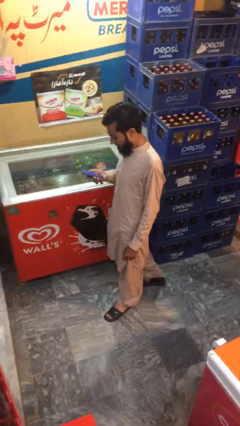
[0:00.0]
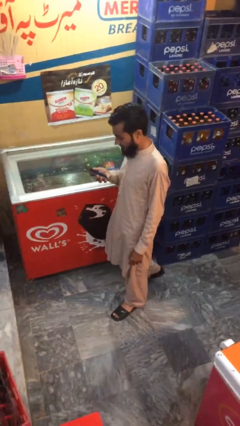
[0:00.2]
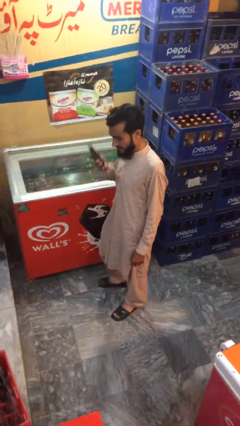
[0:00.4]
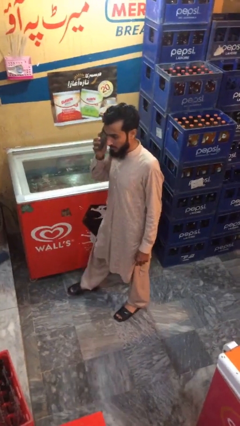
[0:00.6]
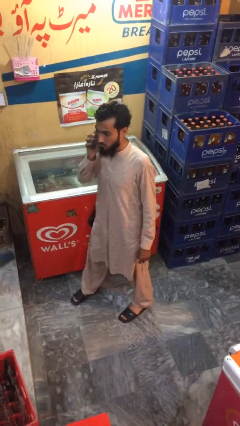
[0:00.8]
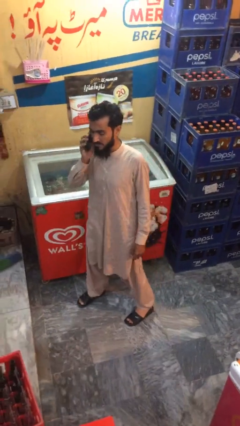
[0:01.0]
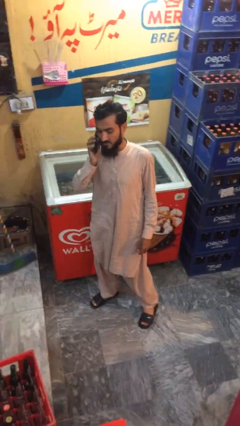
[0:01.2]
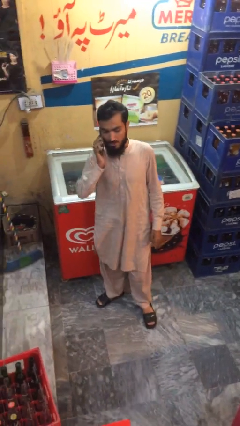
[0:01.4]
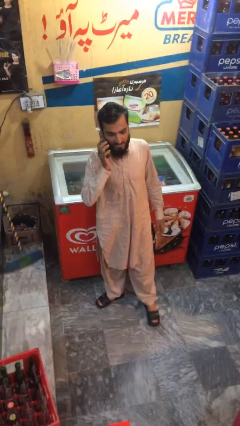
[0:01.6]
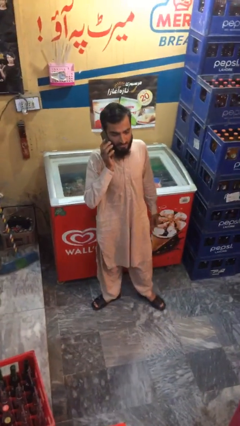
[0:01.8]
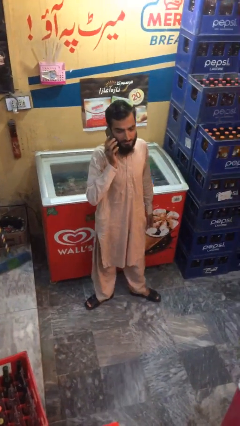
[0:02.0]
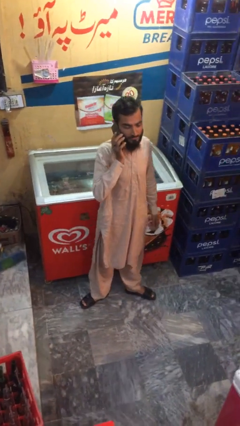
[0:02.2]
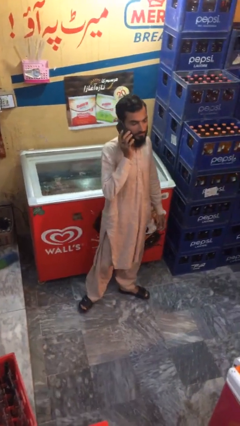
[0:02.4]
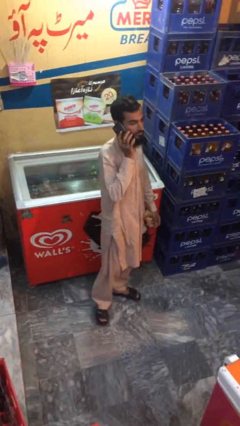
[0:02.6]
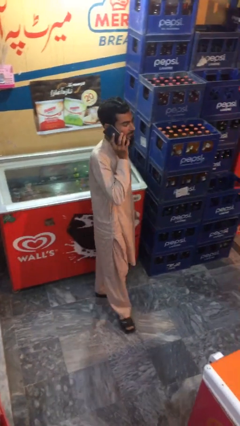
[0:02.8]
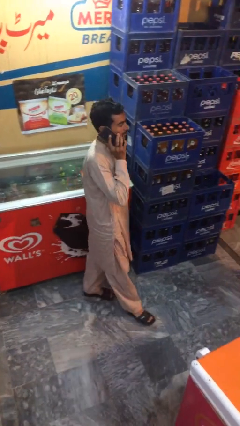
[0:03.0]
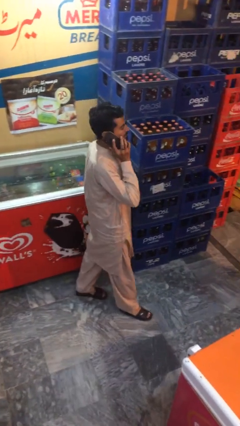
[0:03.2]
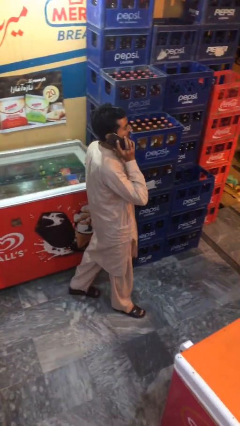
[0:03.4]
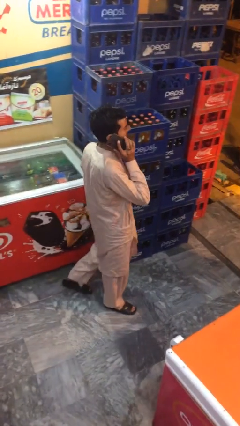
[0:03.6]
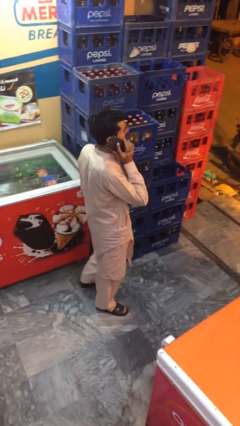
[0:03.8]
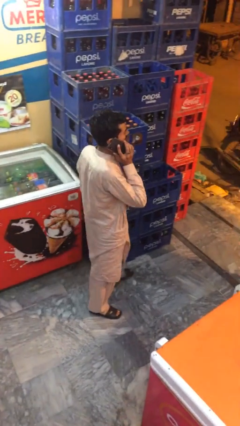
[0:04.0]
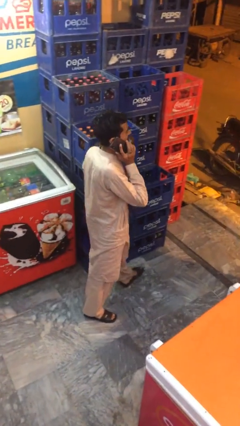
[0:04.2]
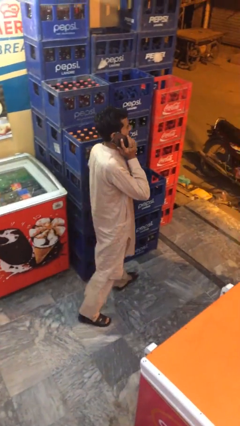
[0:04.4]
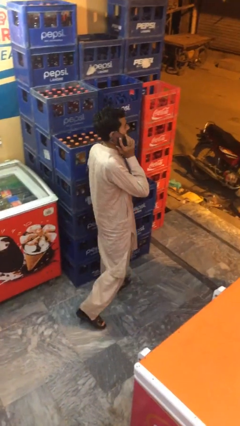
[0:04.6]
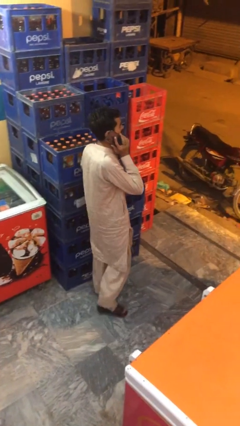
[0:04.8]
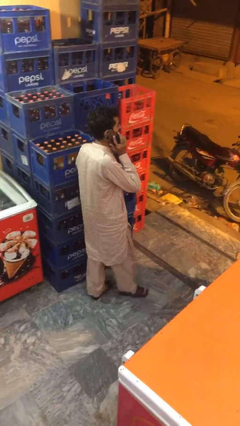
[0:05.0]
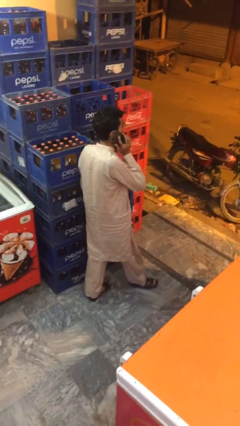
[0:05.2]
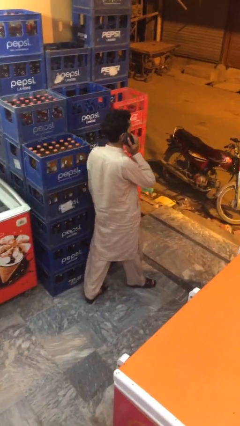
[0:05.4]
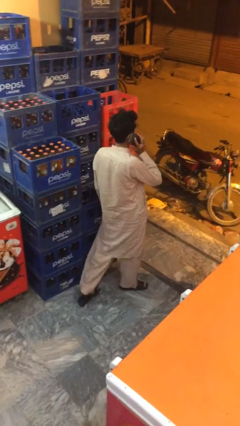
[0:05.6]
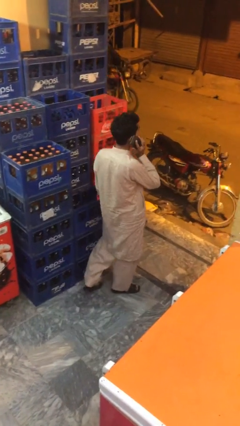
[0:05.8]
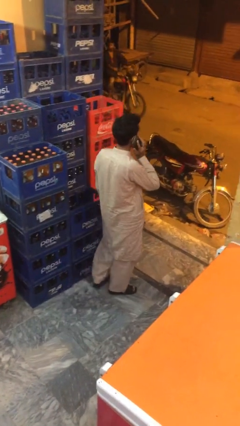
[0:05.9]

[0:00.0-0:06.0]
person talks on phone

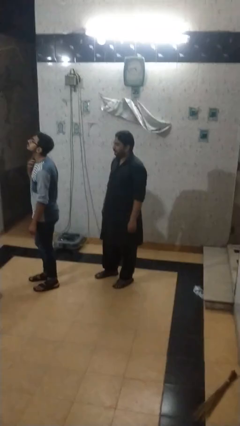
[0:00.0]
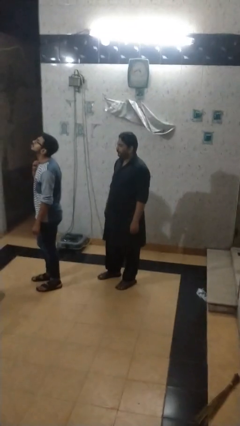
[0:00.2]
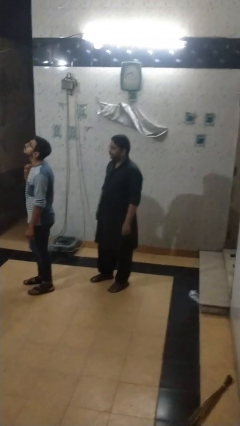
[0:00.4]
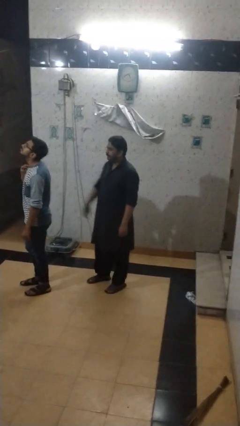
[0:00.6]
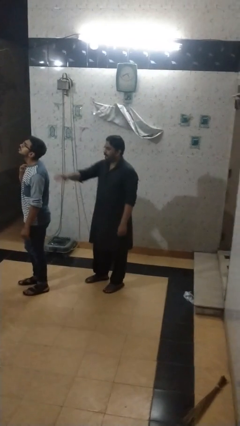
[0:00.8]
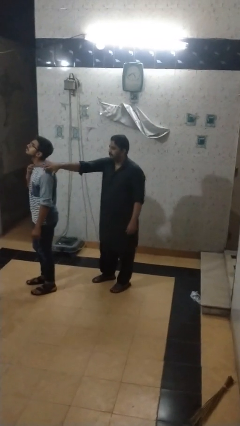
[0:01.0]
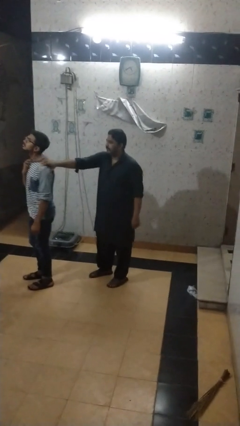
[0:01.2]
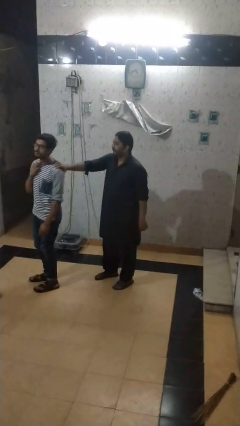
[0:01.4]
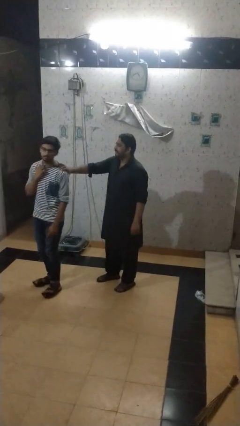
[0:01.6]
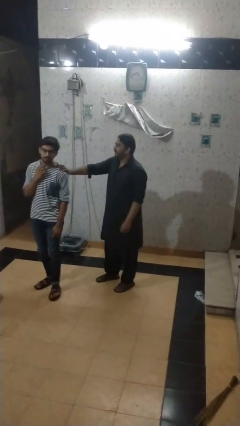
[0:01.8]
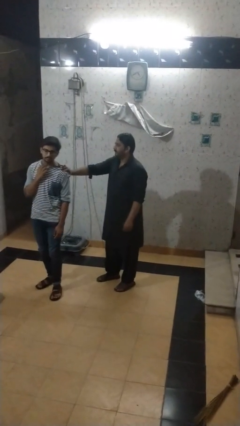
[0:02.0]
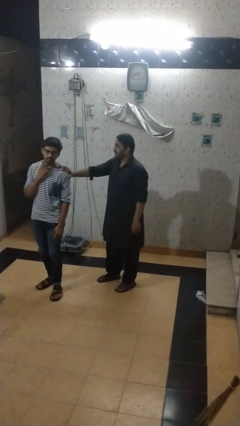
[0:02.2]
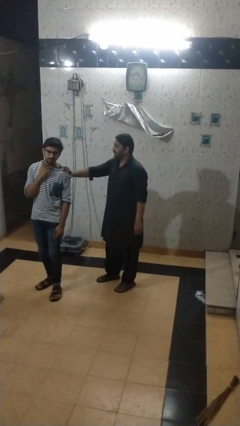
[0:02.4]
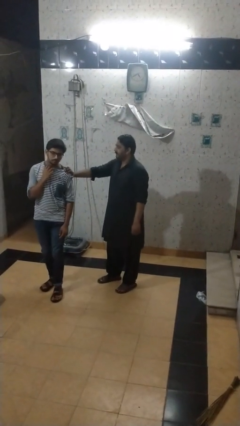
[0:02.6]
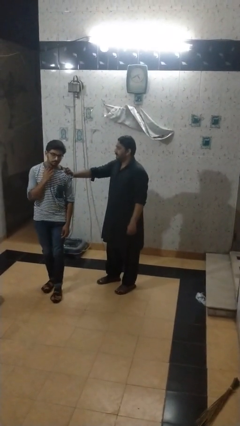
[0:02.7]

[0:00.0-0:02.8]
person grabs person by shoulder

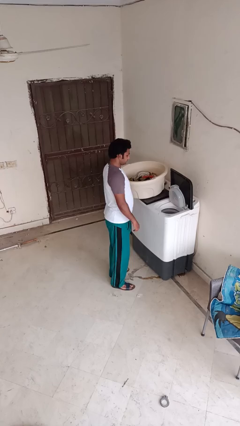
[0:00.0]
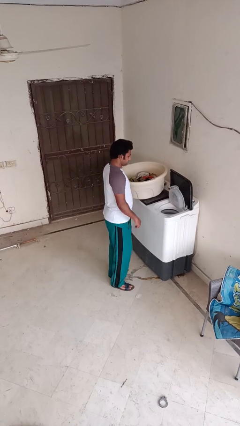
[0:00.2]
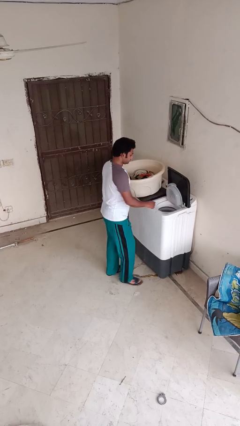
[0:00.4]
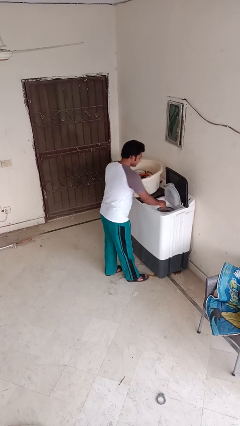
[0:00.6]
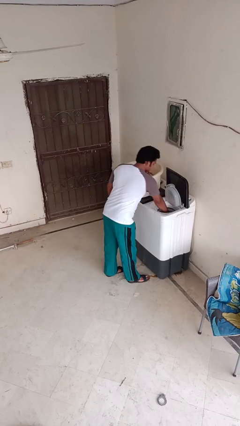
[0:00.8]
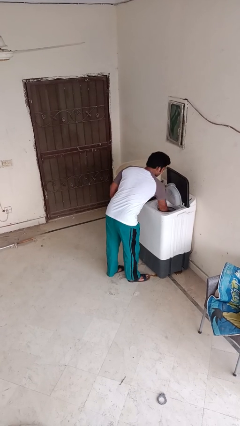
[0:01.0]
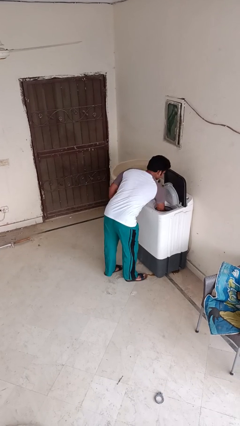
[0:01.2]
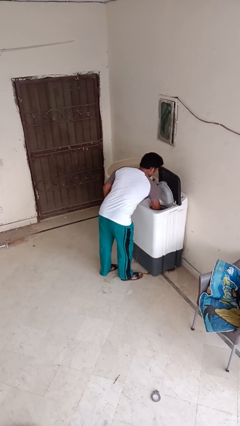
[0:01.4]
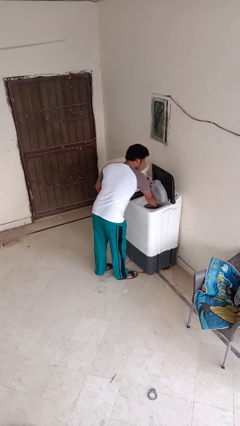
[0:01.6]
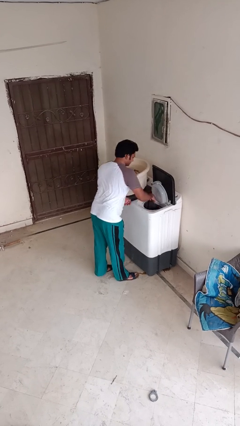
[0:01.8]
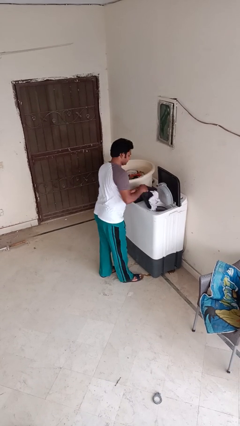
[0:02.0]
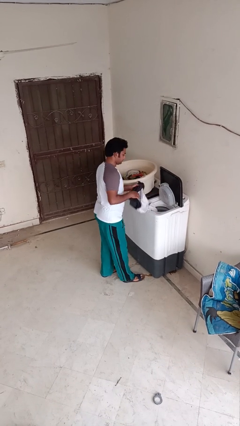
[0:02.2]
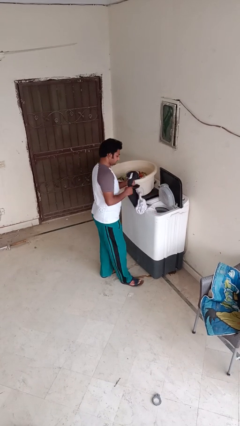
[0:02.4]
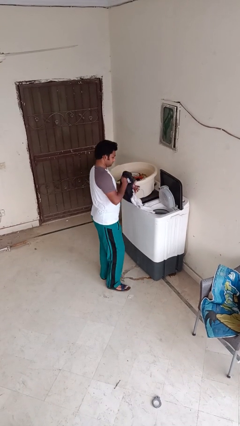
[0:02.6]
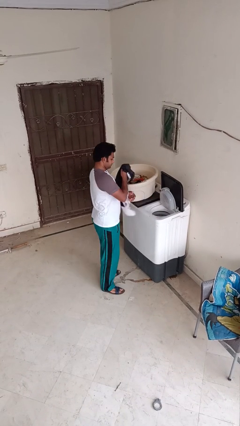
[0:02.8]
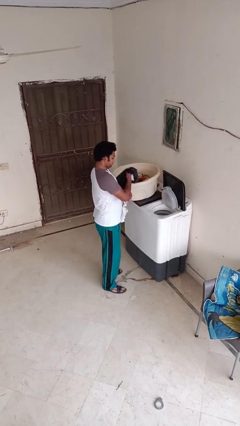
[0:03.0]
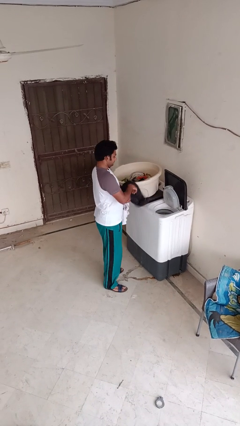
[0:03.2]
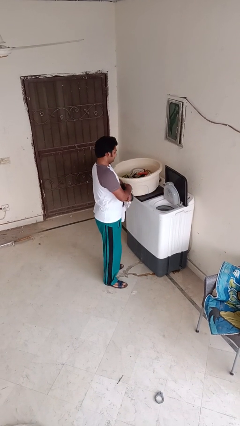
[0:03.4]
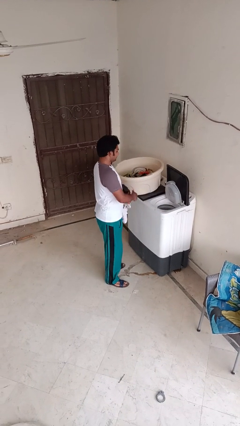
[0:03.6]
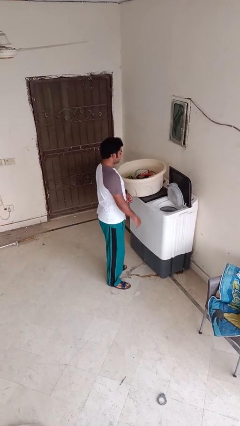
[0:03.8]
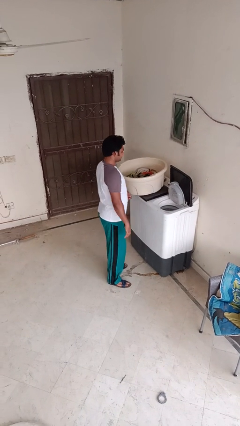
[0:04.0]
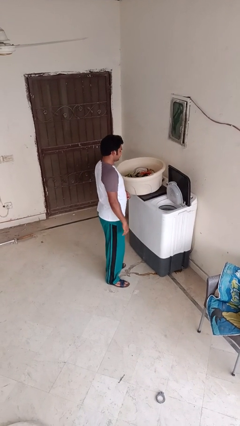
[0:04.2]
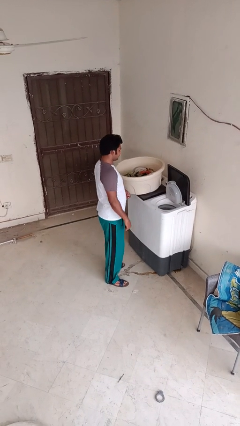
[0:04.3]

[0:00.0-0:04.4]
person unloads dryer

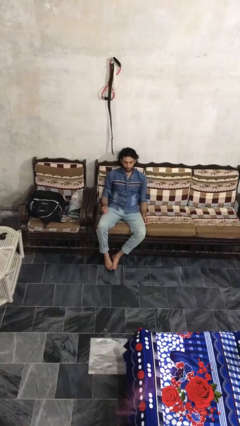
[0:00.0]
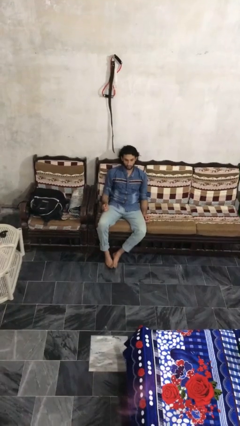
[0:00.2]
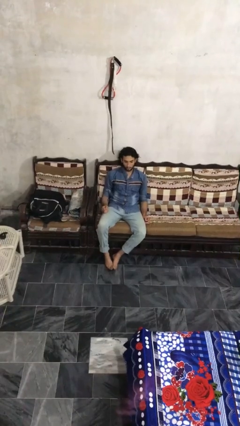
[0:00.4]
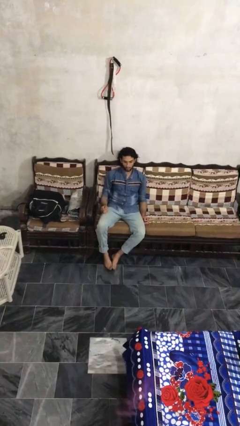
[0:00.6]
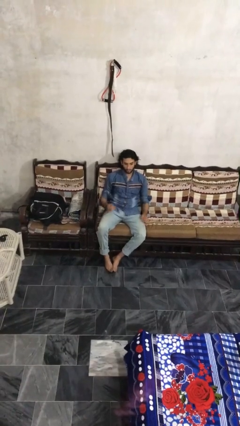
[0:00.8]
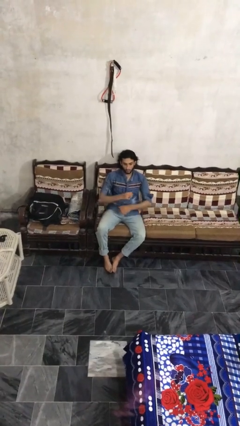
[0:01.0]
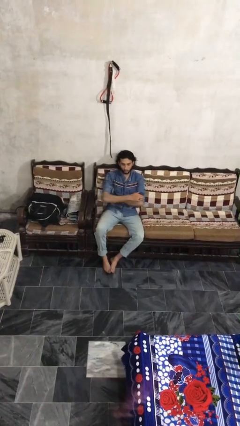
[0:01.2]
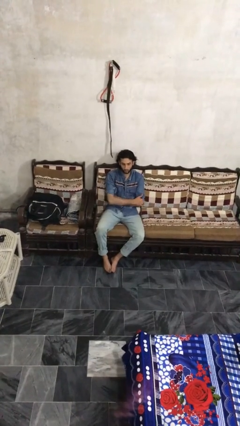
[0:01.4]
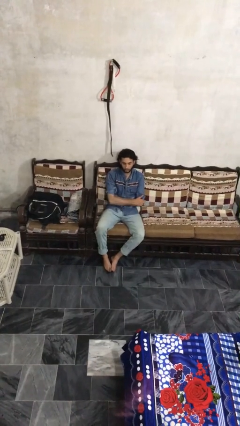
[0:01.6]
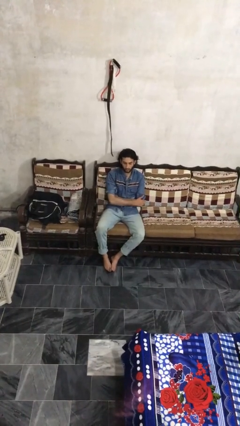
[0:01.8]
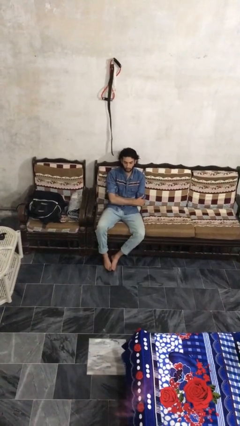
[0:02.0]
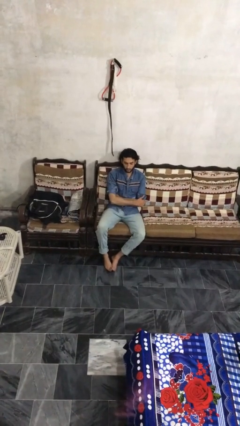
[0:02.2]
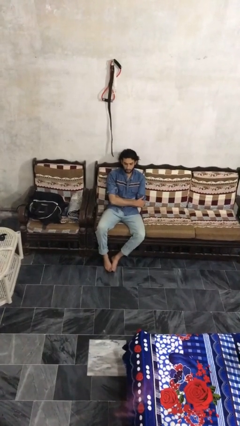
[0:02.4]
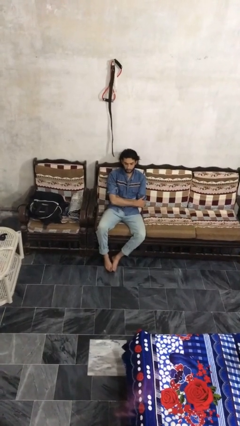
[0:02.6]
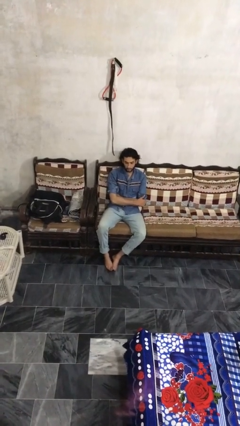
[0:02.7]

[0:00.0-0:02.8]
person crosses arms

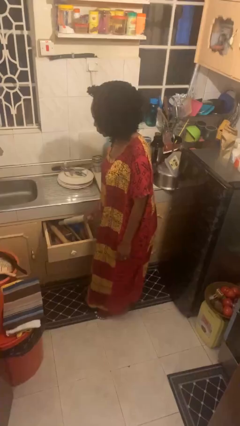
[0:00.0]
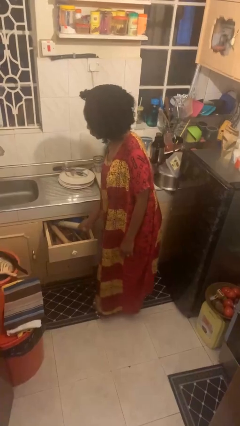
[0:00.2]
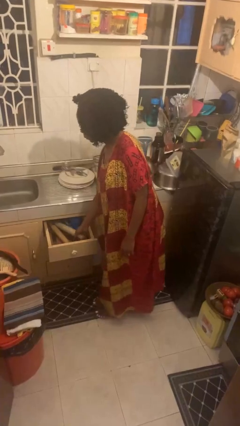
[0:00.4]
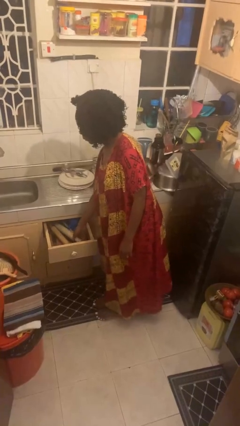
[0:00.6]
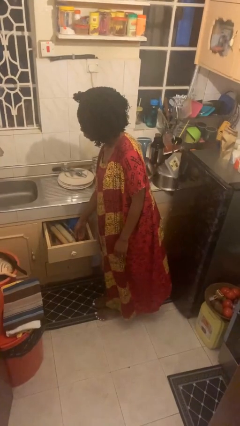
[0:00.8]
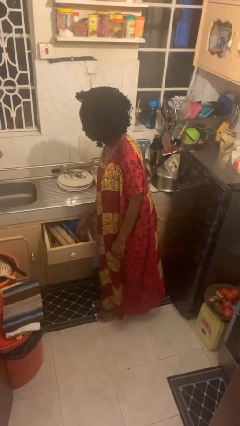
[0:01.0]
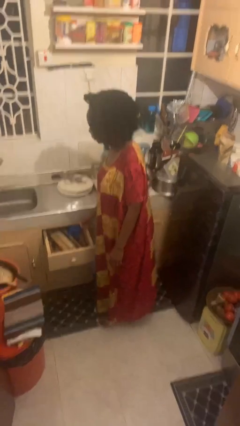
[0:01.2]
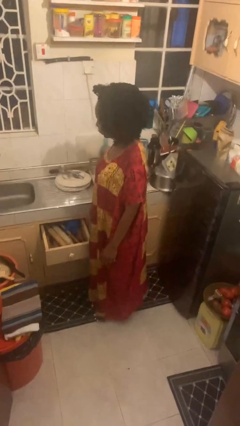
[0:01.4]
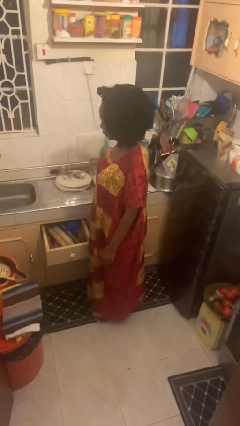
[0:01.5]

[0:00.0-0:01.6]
person puts object into kitchen drawer
